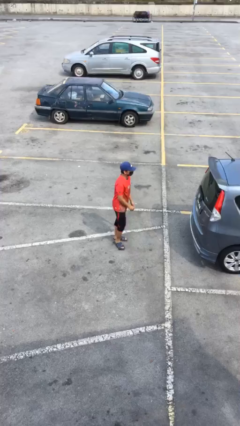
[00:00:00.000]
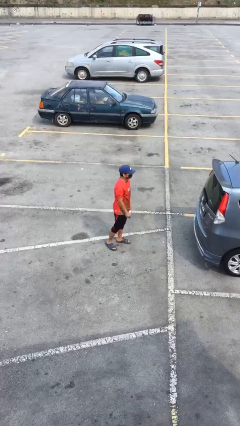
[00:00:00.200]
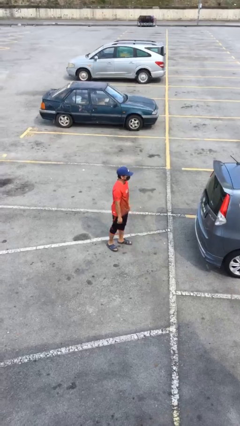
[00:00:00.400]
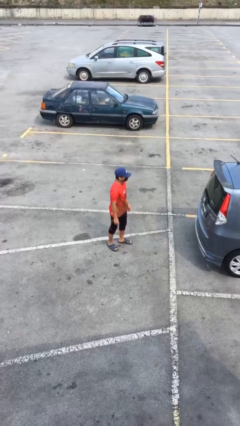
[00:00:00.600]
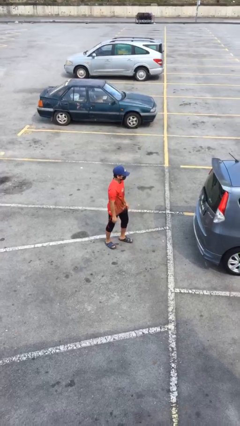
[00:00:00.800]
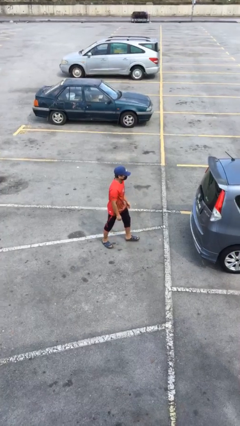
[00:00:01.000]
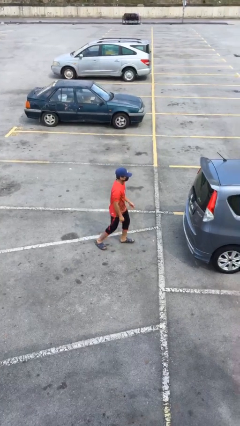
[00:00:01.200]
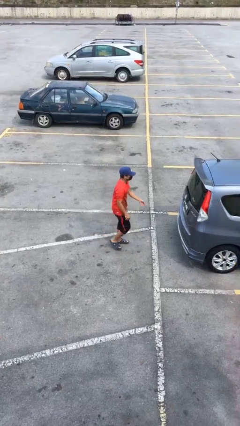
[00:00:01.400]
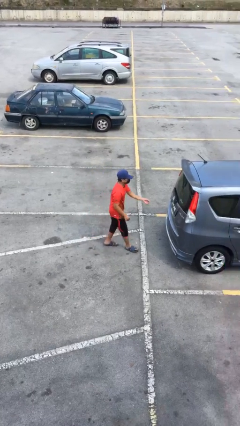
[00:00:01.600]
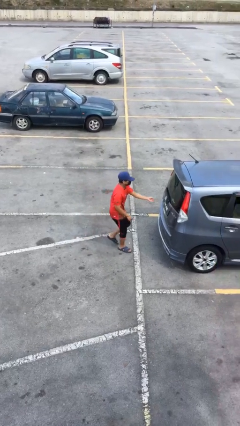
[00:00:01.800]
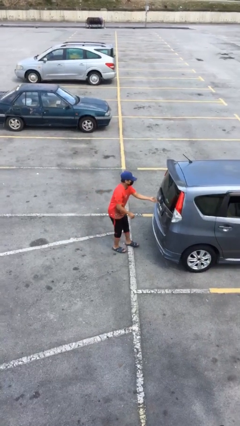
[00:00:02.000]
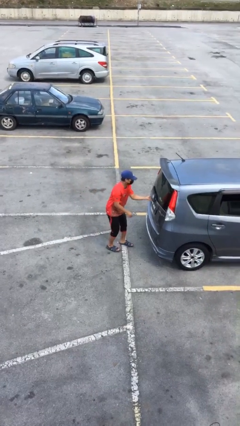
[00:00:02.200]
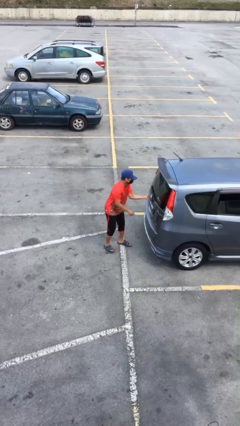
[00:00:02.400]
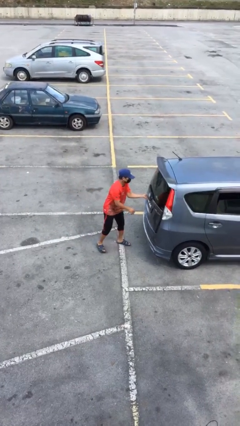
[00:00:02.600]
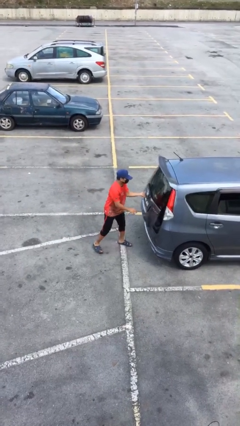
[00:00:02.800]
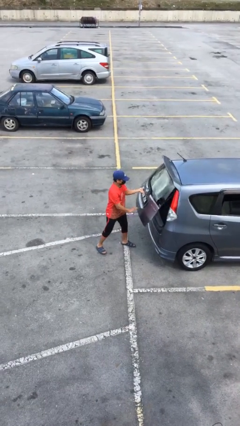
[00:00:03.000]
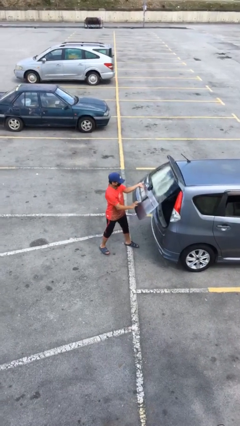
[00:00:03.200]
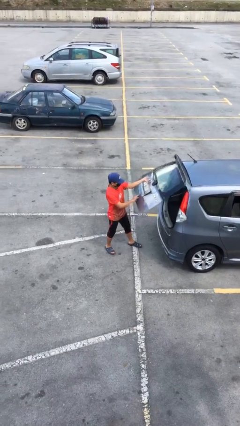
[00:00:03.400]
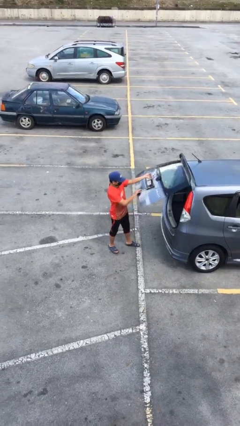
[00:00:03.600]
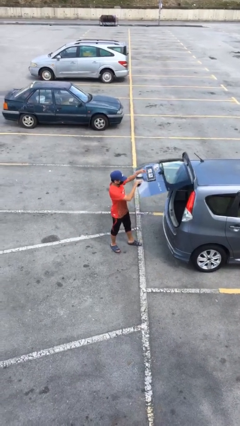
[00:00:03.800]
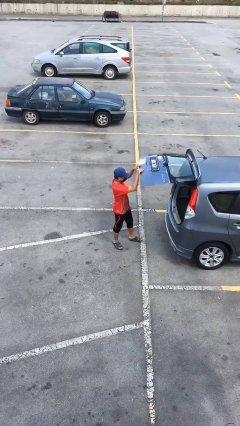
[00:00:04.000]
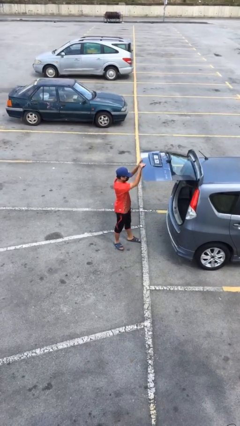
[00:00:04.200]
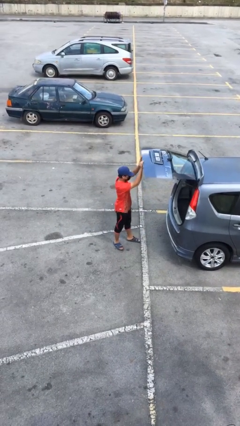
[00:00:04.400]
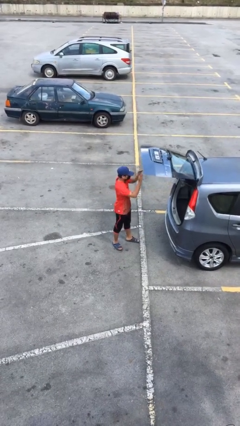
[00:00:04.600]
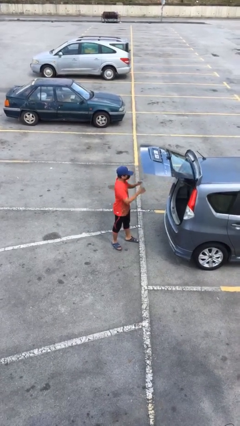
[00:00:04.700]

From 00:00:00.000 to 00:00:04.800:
person opens car trunk

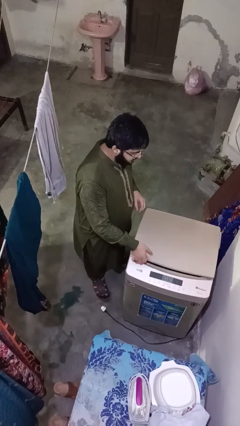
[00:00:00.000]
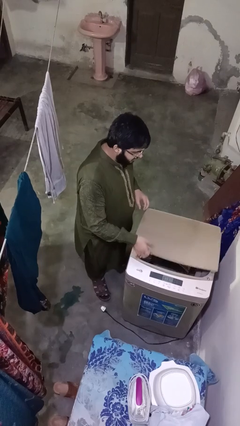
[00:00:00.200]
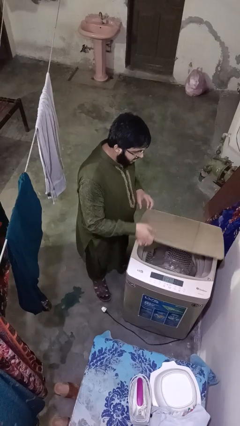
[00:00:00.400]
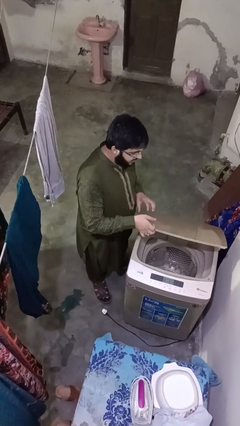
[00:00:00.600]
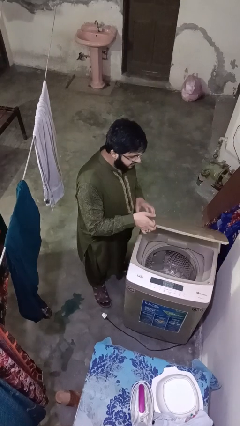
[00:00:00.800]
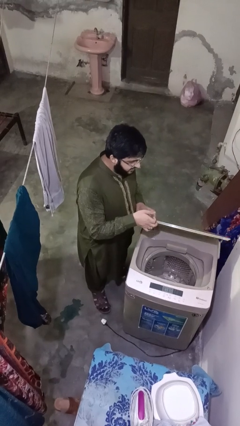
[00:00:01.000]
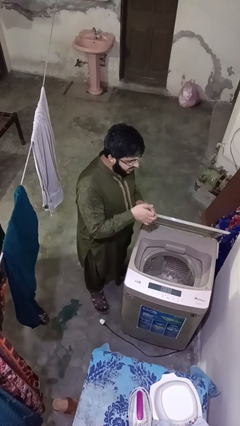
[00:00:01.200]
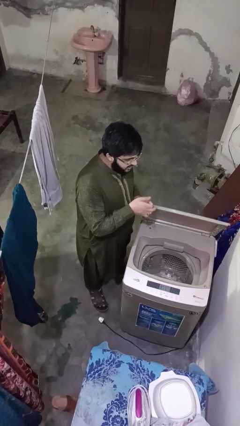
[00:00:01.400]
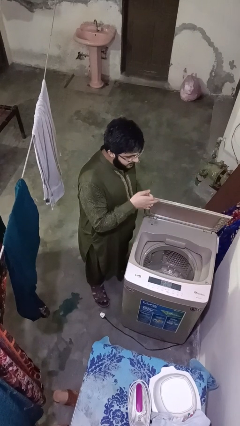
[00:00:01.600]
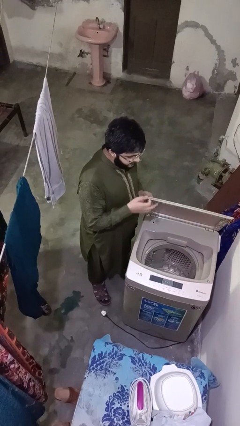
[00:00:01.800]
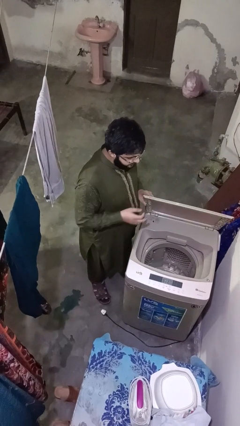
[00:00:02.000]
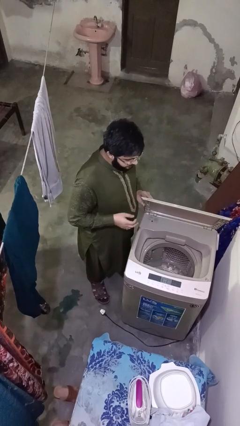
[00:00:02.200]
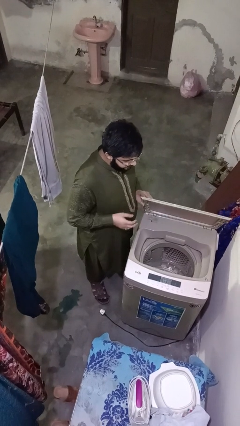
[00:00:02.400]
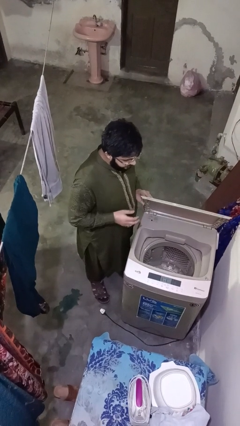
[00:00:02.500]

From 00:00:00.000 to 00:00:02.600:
person opens clothes washer

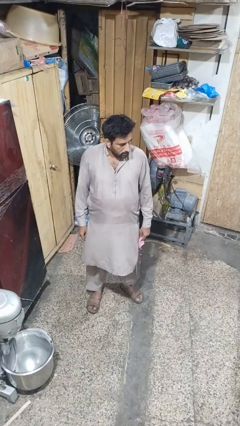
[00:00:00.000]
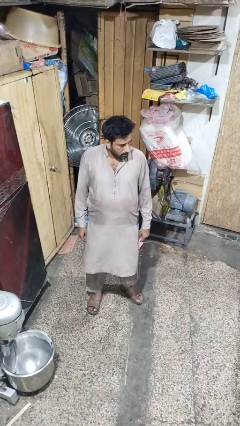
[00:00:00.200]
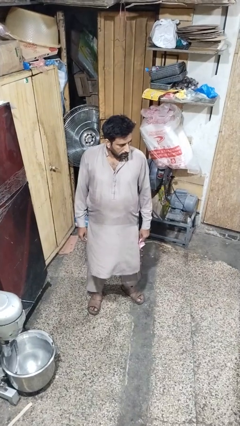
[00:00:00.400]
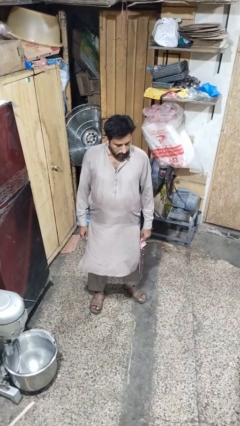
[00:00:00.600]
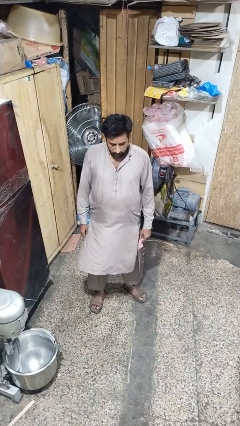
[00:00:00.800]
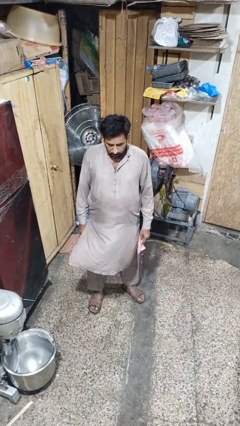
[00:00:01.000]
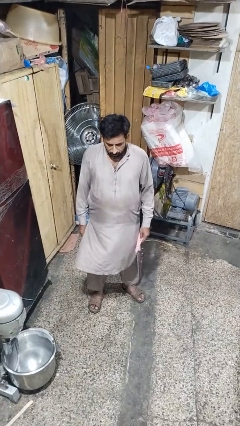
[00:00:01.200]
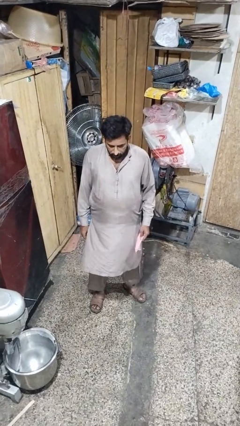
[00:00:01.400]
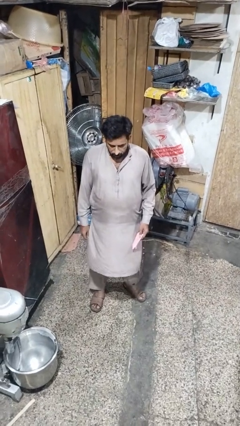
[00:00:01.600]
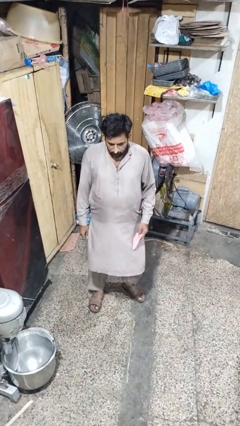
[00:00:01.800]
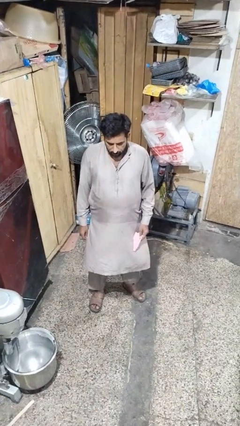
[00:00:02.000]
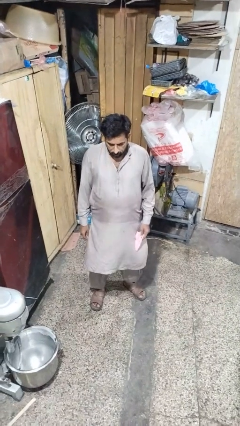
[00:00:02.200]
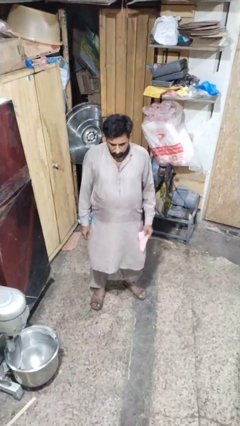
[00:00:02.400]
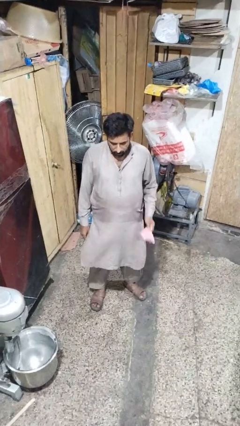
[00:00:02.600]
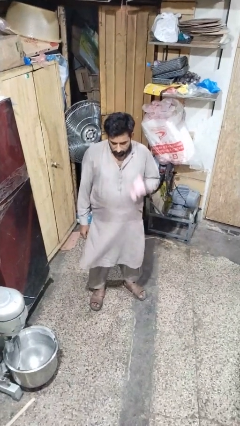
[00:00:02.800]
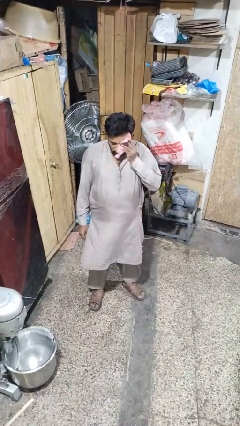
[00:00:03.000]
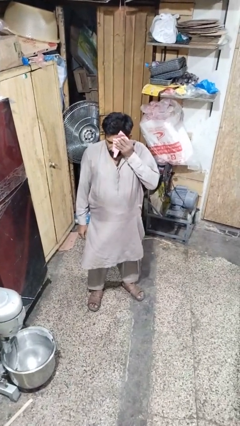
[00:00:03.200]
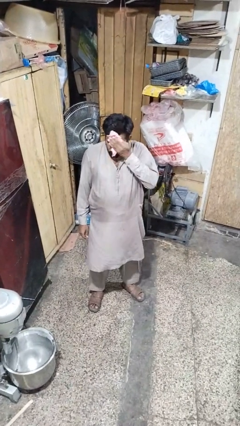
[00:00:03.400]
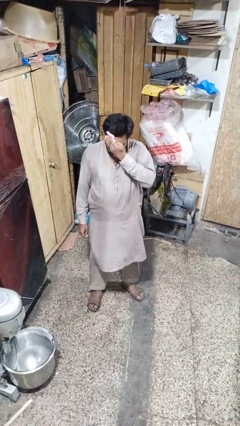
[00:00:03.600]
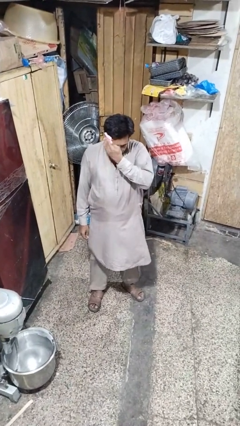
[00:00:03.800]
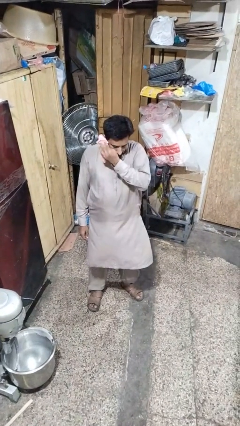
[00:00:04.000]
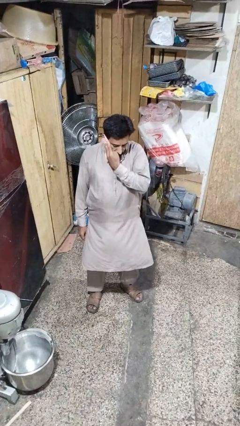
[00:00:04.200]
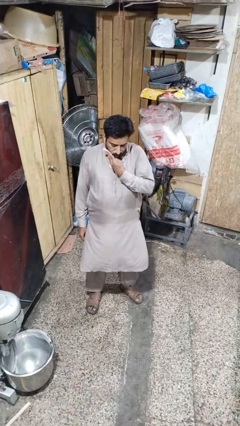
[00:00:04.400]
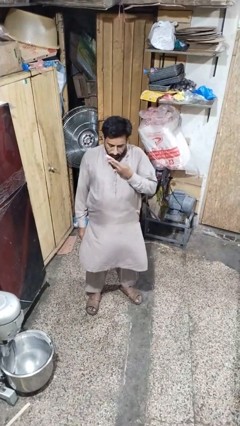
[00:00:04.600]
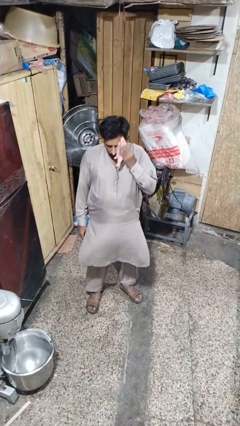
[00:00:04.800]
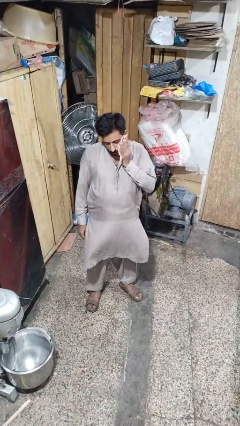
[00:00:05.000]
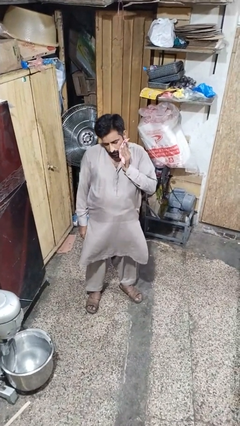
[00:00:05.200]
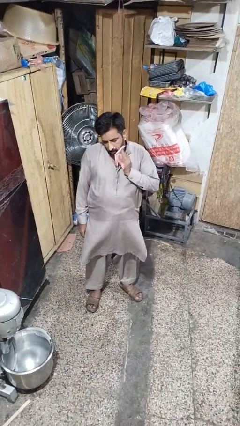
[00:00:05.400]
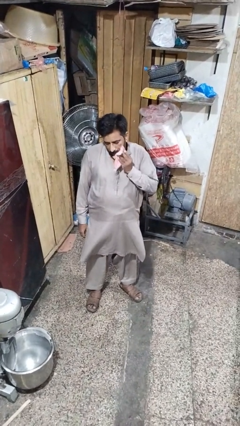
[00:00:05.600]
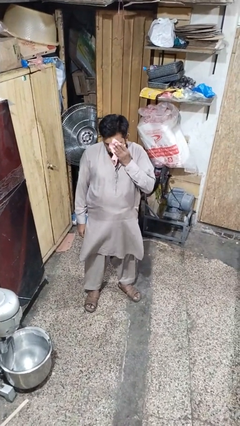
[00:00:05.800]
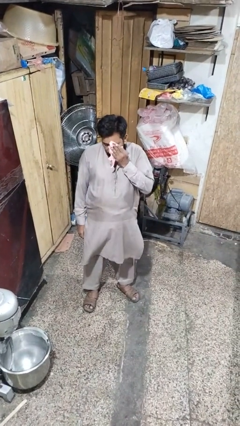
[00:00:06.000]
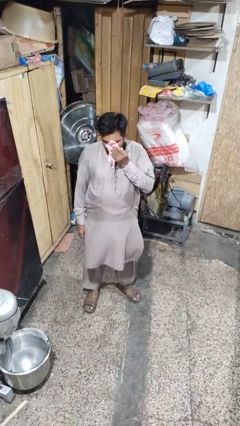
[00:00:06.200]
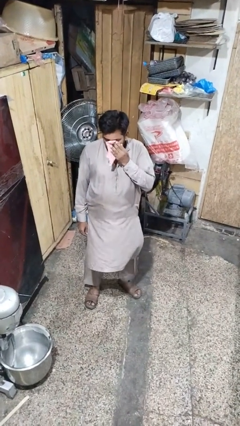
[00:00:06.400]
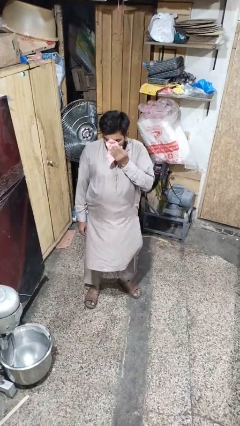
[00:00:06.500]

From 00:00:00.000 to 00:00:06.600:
person wipes mouth with napkin

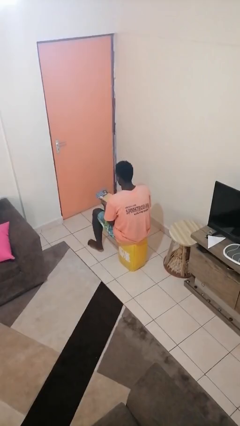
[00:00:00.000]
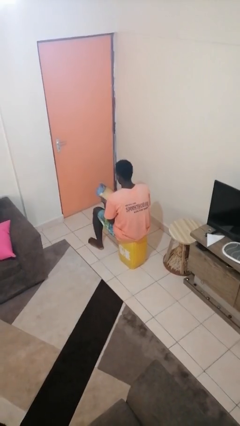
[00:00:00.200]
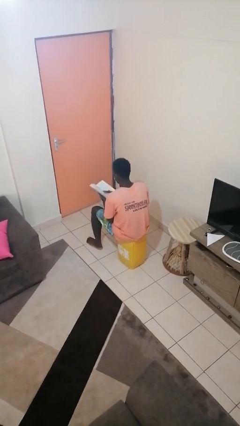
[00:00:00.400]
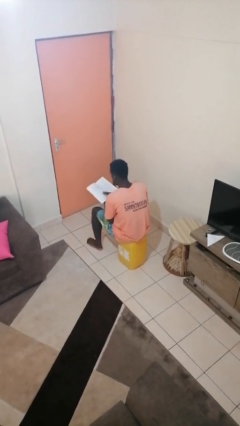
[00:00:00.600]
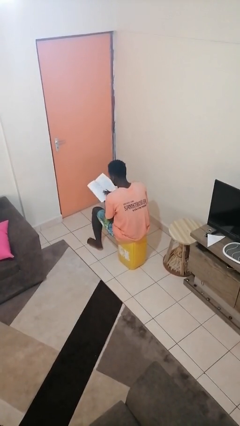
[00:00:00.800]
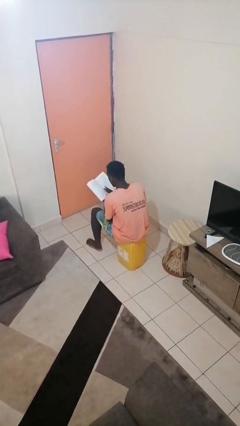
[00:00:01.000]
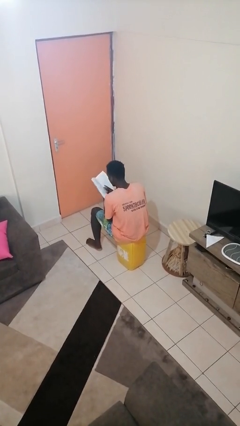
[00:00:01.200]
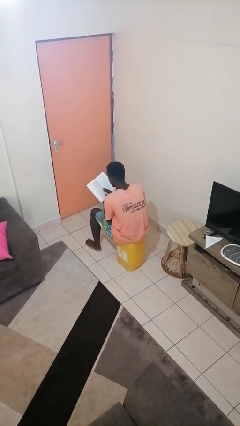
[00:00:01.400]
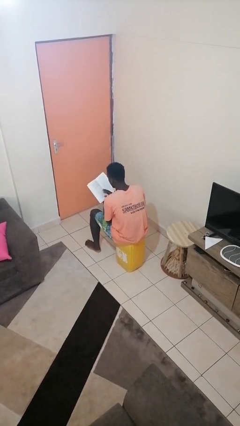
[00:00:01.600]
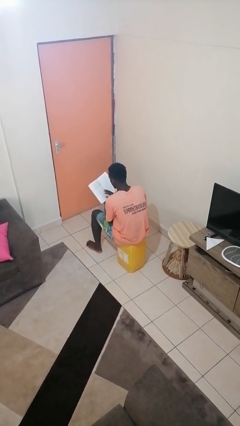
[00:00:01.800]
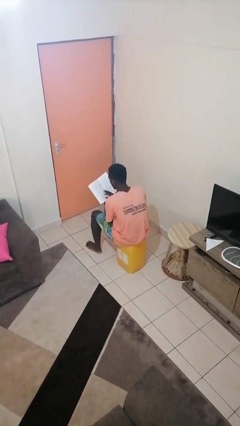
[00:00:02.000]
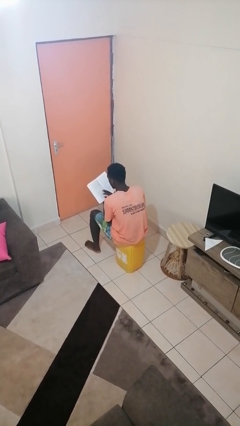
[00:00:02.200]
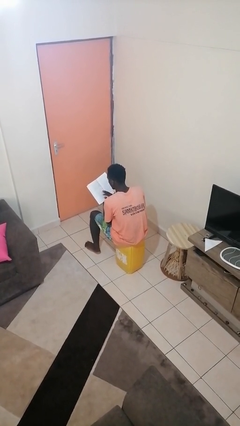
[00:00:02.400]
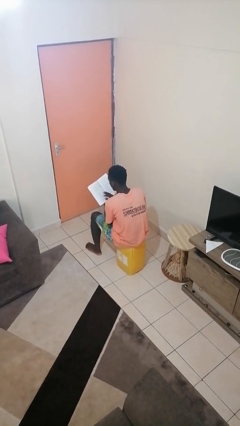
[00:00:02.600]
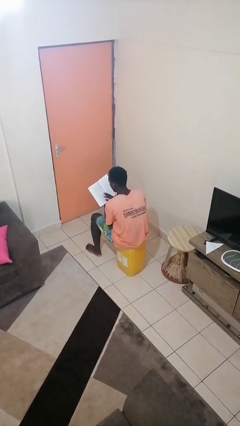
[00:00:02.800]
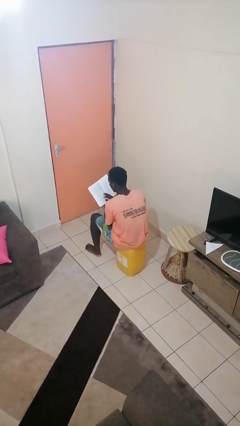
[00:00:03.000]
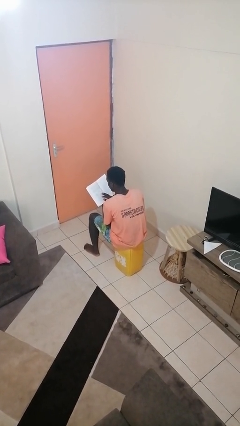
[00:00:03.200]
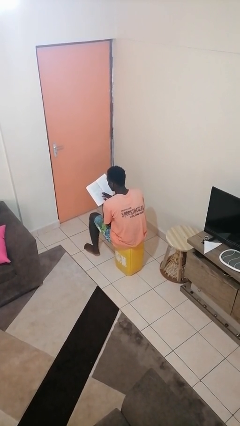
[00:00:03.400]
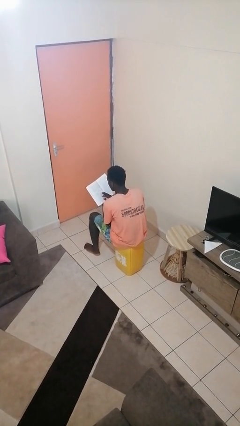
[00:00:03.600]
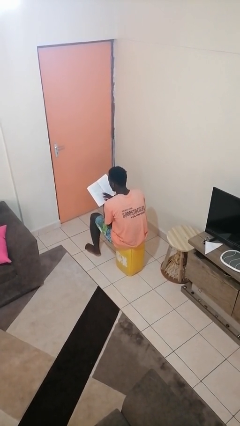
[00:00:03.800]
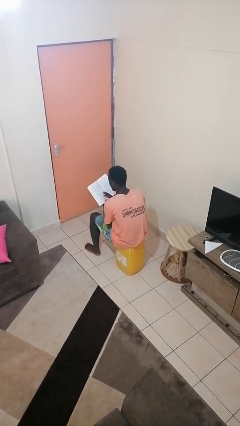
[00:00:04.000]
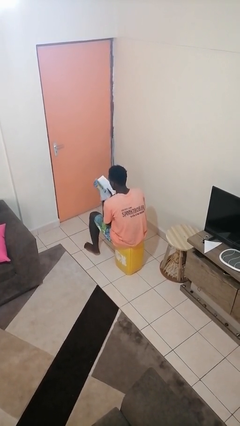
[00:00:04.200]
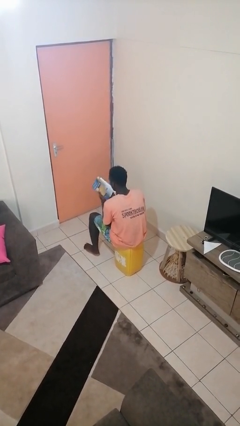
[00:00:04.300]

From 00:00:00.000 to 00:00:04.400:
person reads book
